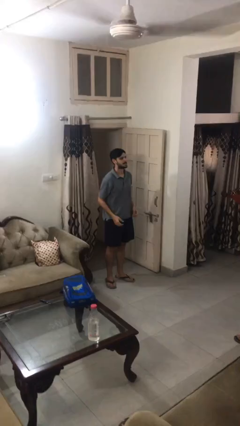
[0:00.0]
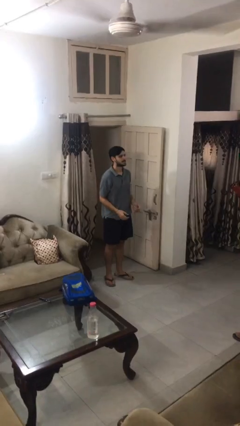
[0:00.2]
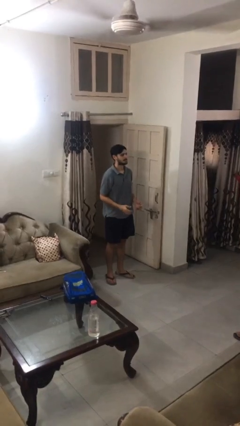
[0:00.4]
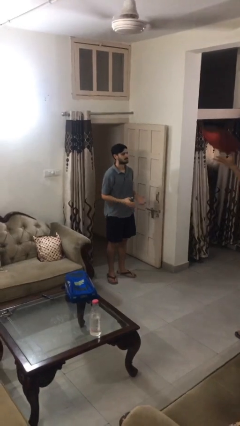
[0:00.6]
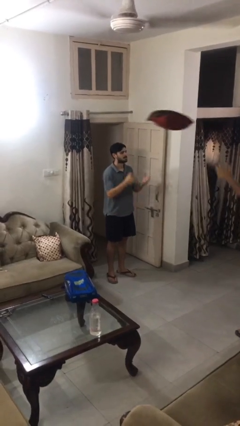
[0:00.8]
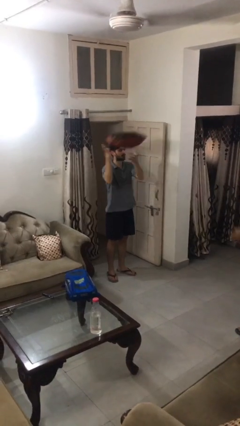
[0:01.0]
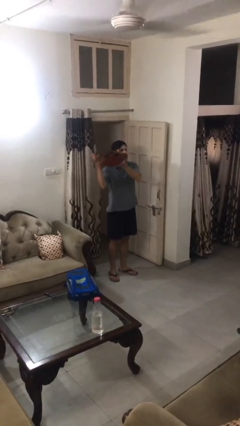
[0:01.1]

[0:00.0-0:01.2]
person catches object from person

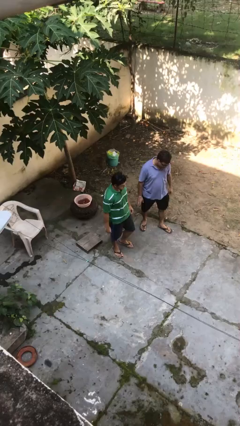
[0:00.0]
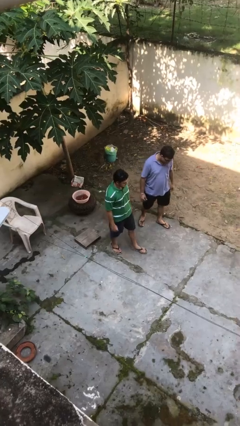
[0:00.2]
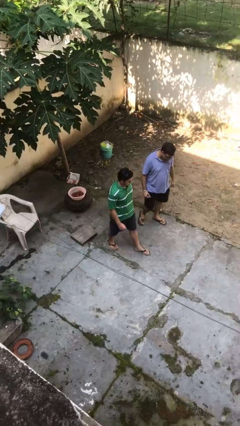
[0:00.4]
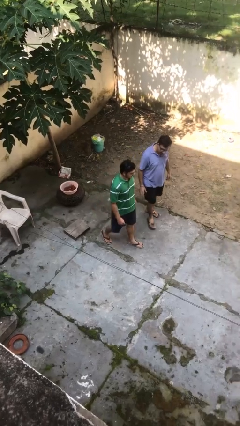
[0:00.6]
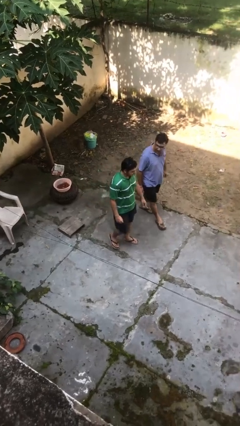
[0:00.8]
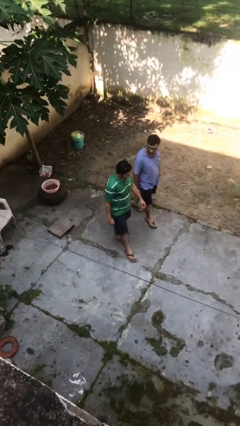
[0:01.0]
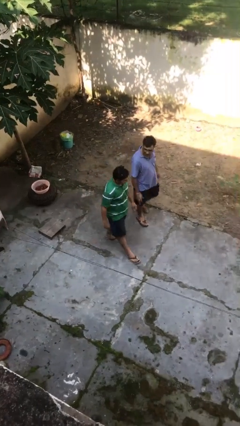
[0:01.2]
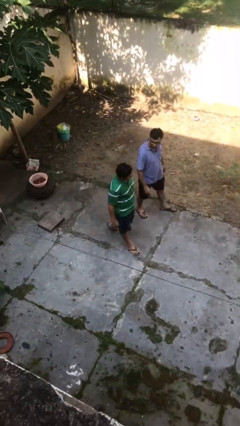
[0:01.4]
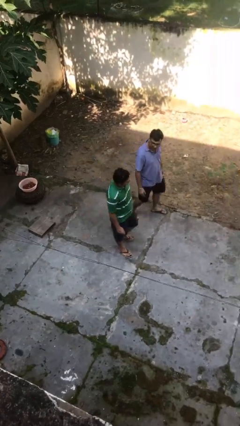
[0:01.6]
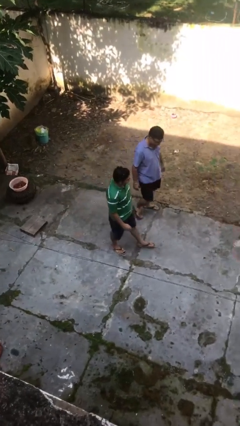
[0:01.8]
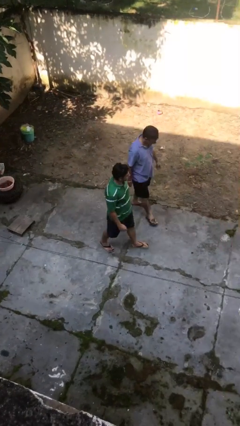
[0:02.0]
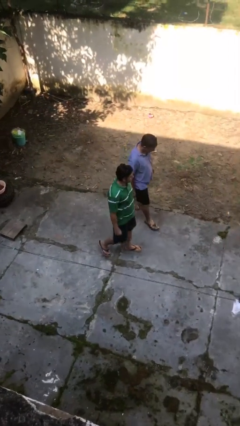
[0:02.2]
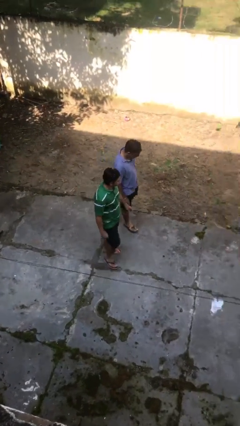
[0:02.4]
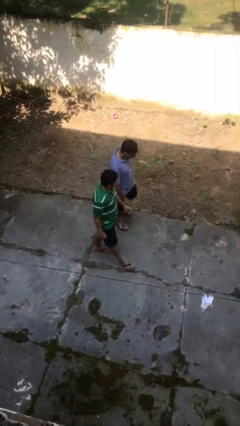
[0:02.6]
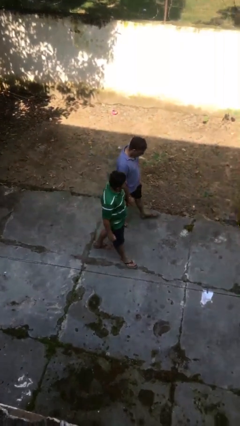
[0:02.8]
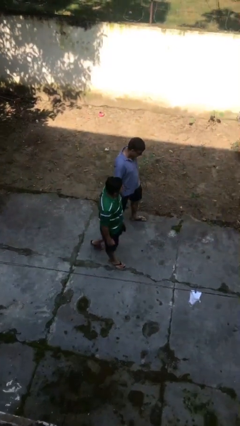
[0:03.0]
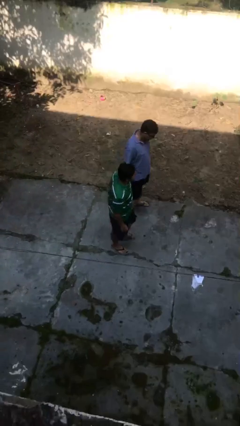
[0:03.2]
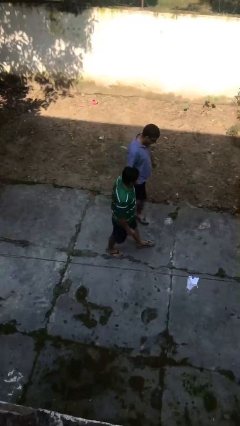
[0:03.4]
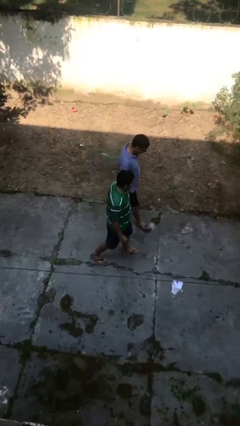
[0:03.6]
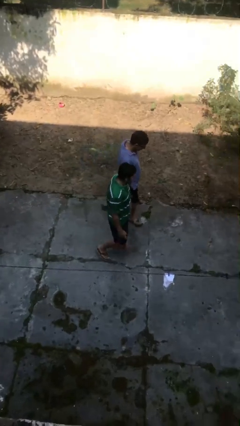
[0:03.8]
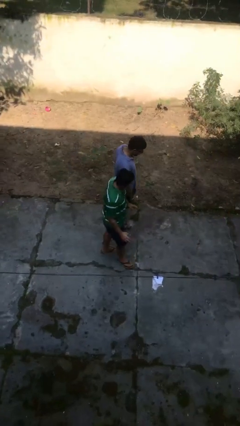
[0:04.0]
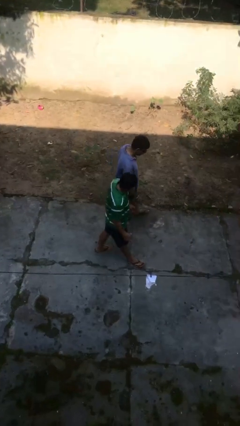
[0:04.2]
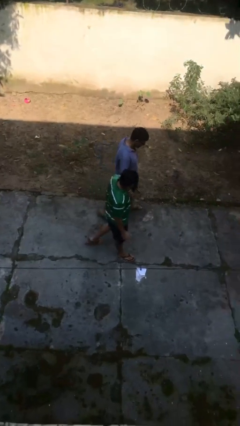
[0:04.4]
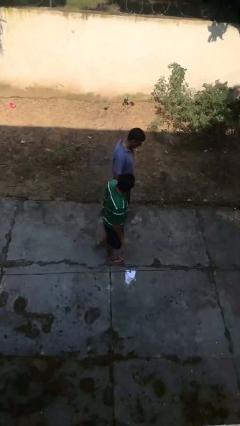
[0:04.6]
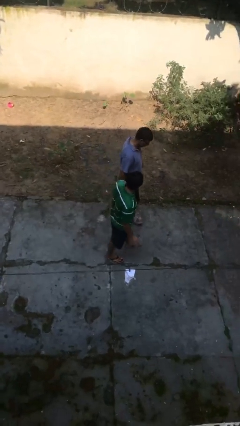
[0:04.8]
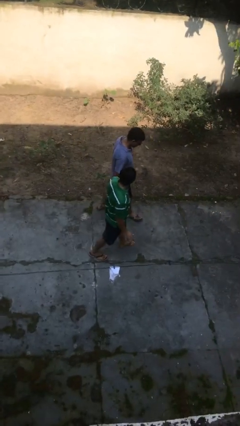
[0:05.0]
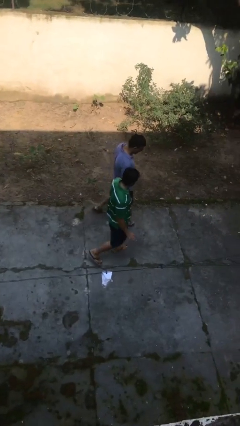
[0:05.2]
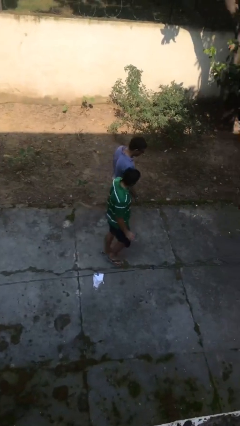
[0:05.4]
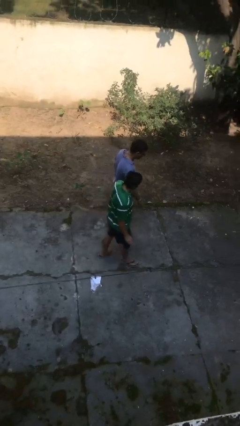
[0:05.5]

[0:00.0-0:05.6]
person talks to person

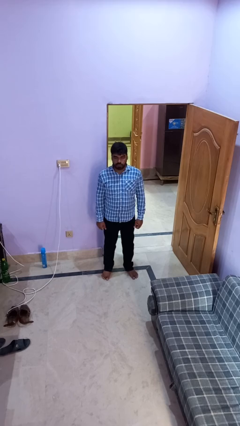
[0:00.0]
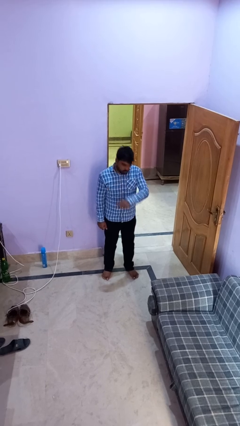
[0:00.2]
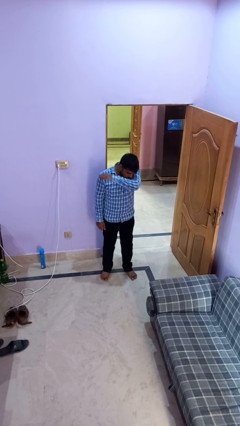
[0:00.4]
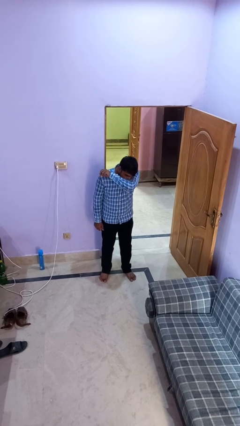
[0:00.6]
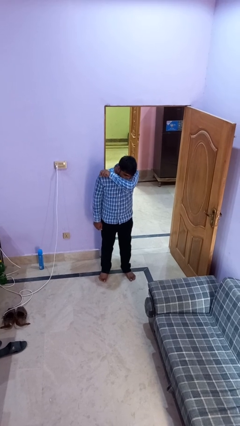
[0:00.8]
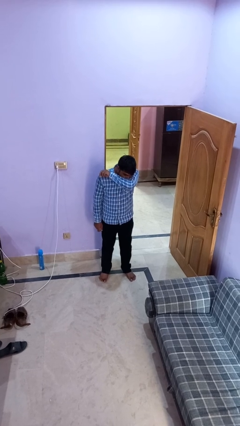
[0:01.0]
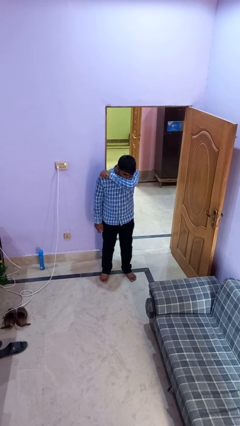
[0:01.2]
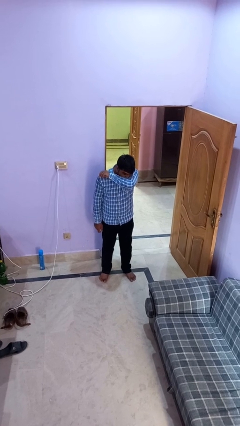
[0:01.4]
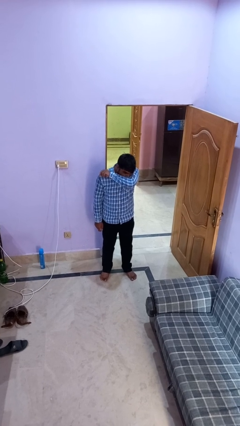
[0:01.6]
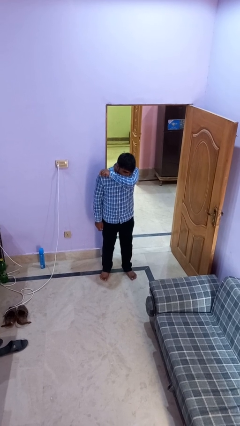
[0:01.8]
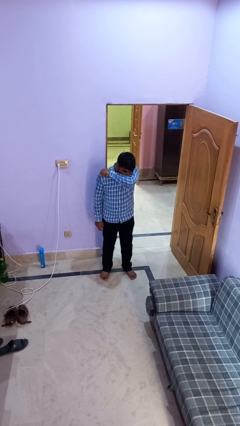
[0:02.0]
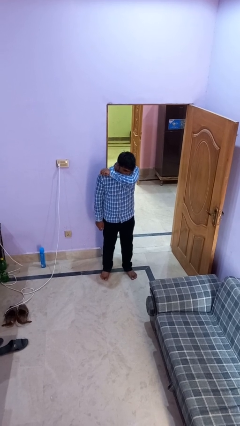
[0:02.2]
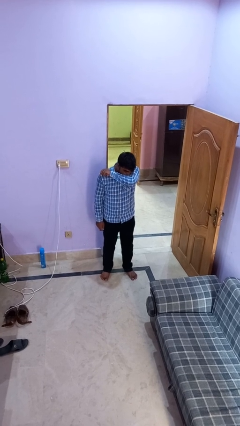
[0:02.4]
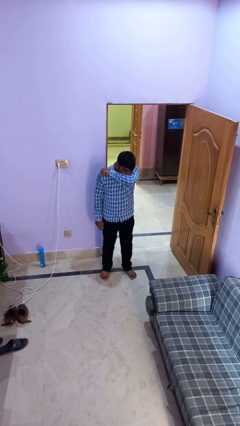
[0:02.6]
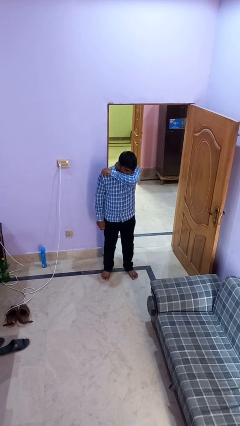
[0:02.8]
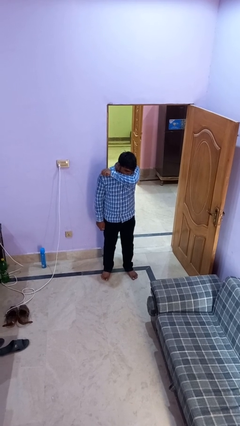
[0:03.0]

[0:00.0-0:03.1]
person sneezes into arm

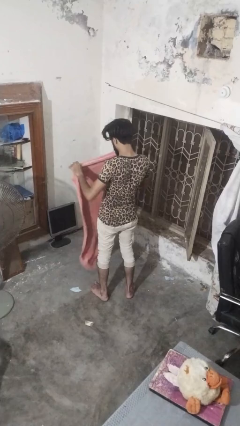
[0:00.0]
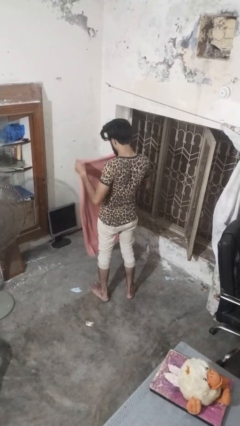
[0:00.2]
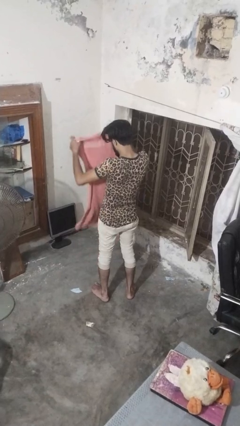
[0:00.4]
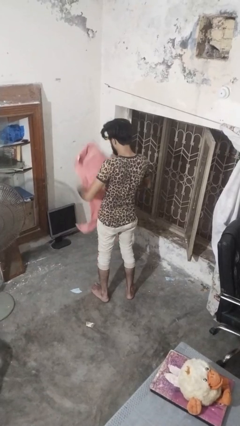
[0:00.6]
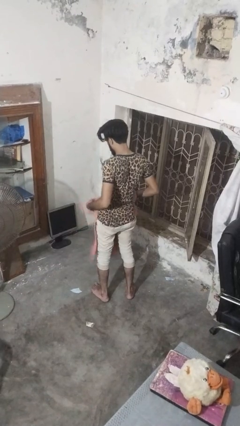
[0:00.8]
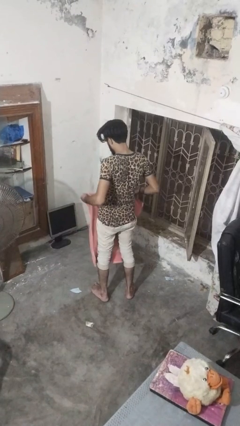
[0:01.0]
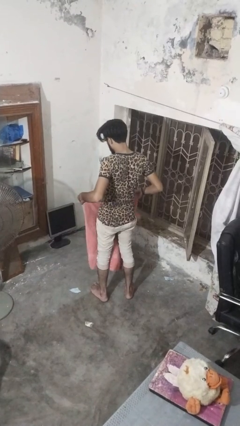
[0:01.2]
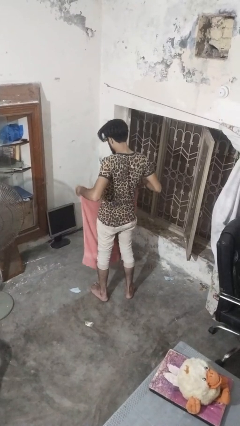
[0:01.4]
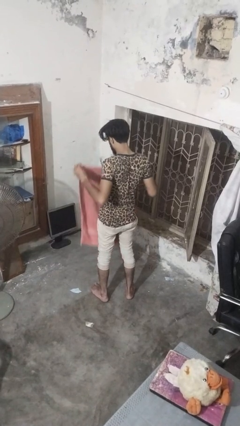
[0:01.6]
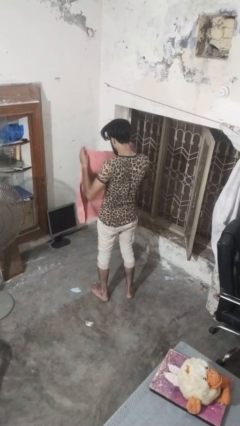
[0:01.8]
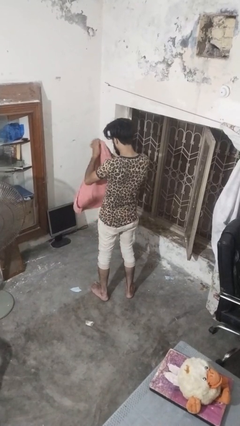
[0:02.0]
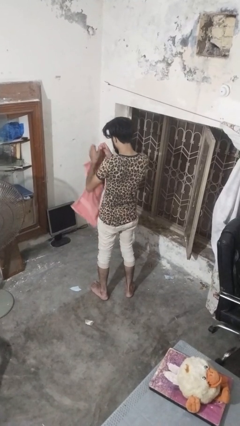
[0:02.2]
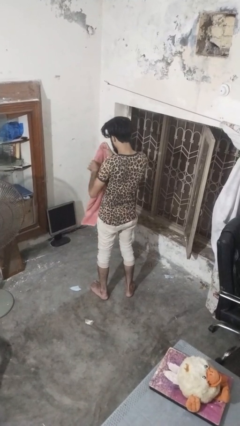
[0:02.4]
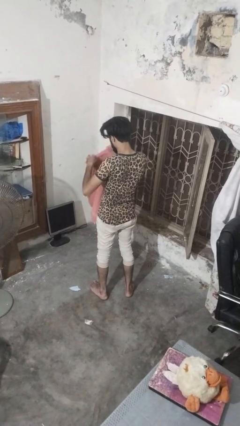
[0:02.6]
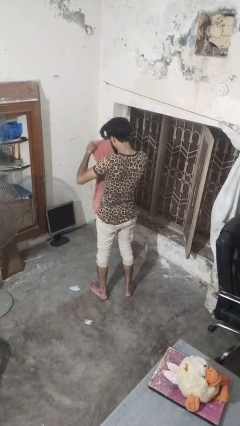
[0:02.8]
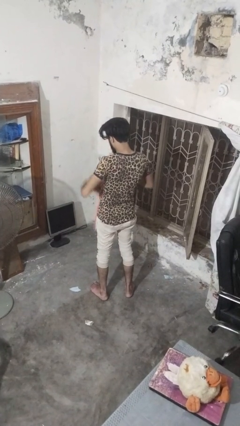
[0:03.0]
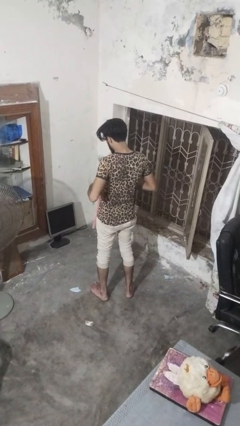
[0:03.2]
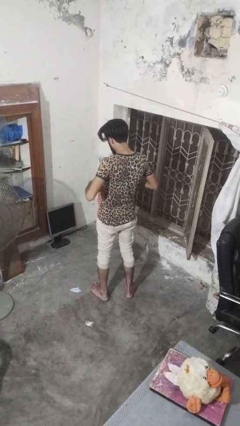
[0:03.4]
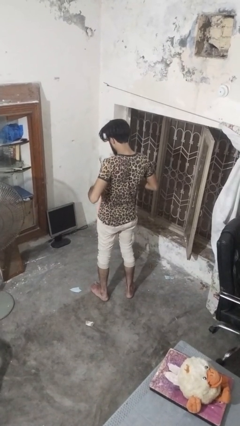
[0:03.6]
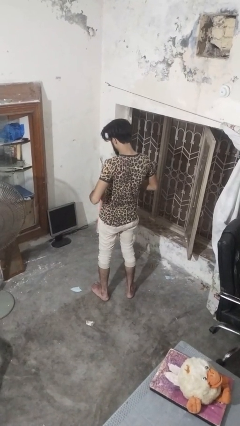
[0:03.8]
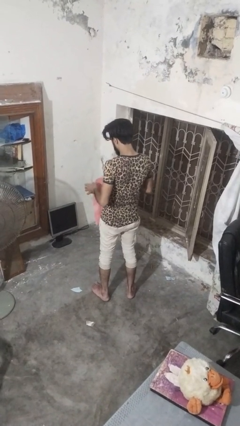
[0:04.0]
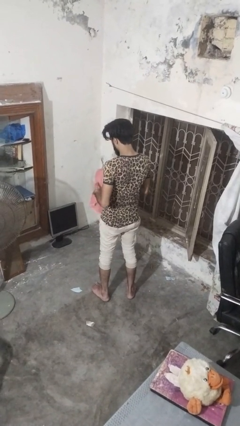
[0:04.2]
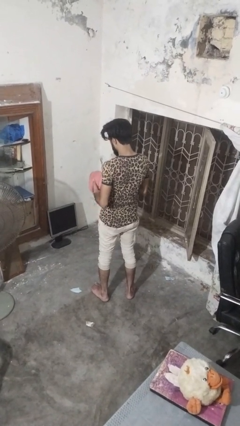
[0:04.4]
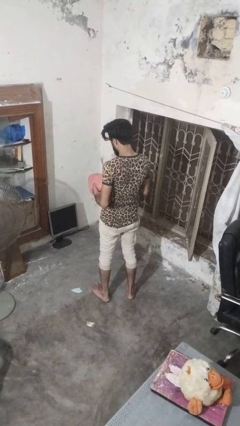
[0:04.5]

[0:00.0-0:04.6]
person folds towel

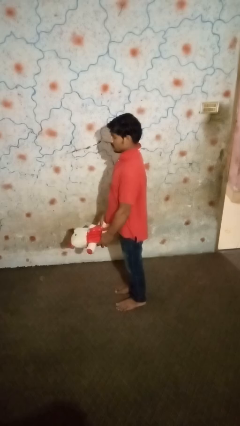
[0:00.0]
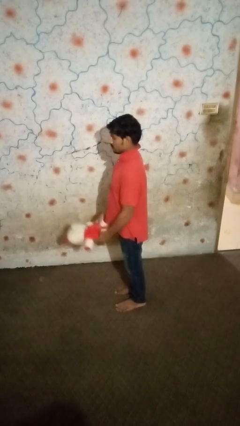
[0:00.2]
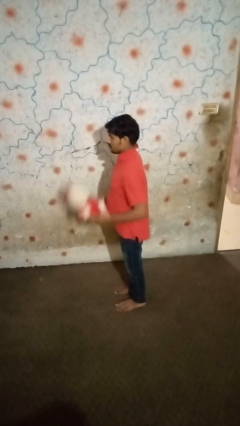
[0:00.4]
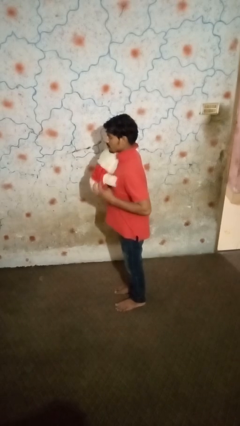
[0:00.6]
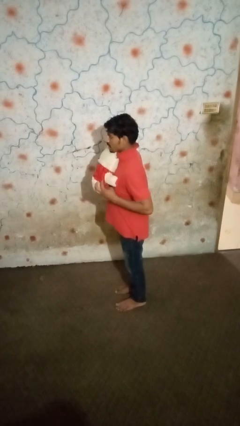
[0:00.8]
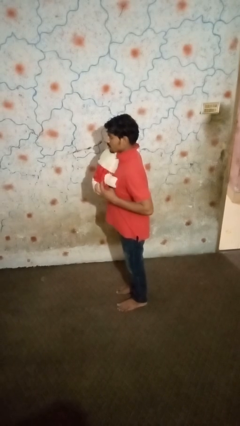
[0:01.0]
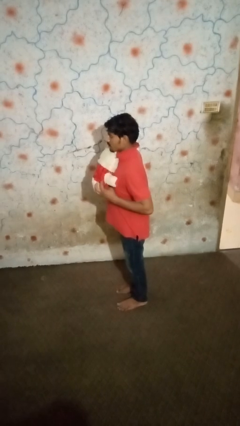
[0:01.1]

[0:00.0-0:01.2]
person hugs stuffed animal

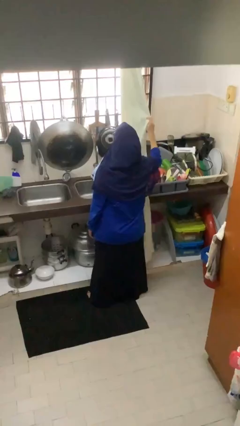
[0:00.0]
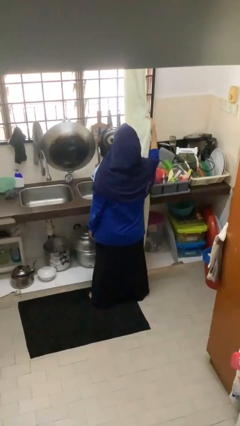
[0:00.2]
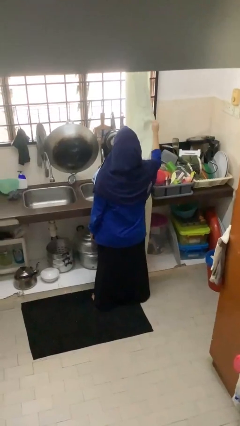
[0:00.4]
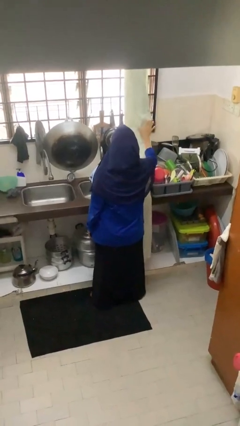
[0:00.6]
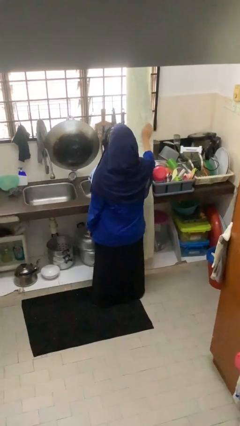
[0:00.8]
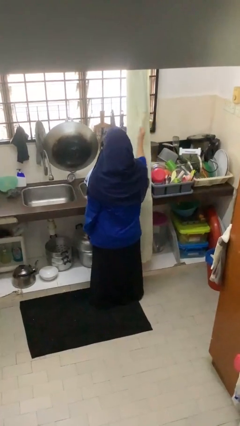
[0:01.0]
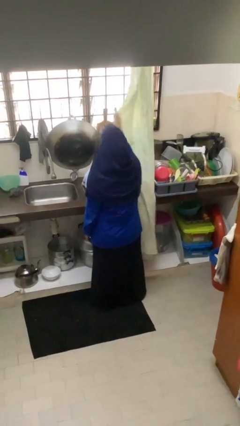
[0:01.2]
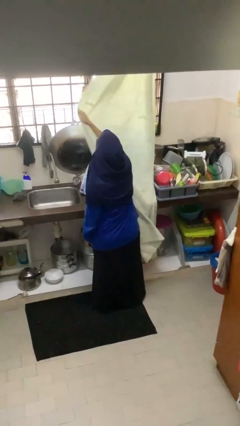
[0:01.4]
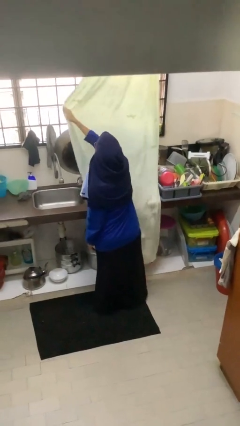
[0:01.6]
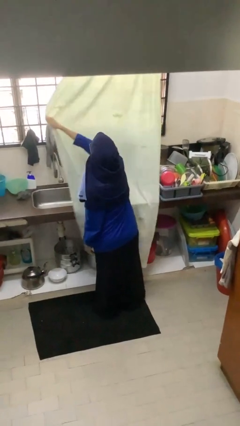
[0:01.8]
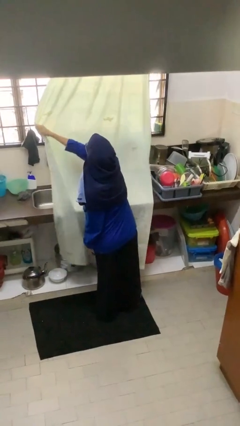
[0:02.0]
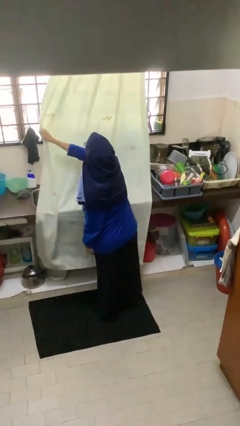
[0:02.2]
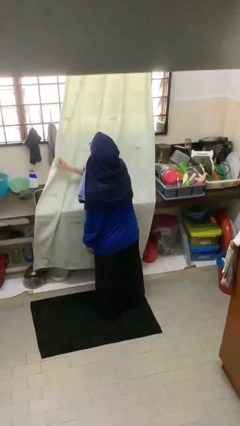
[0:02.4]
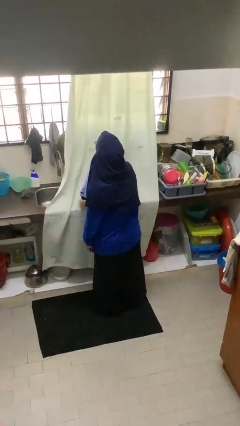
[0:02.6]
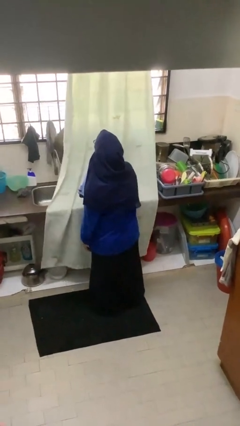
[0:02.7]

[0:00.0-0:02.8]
person closes curtains
